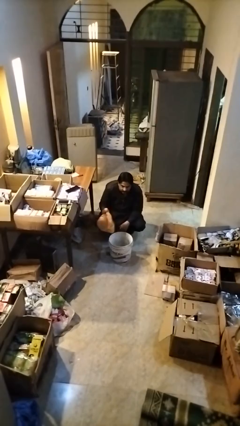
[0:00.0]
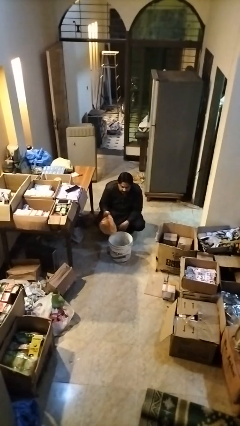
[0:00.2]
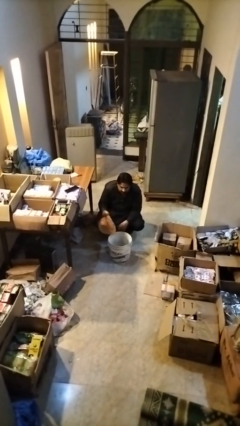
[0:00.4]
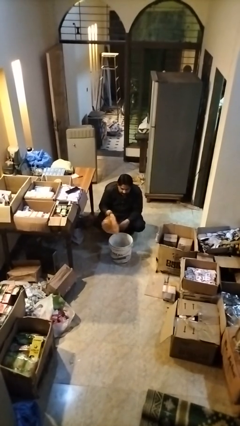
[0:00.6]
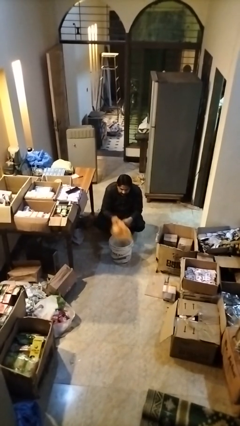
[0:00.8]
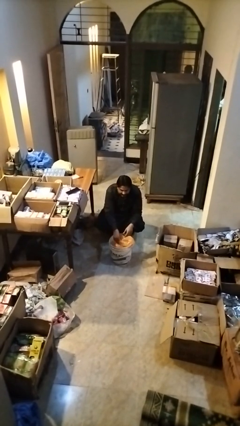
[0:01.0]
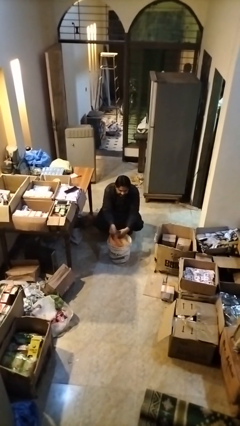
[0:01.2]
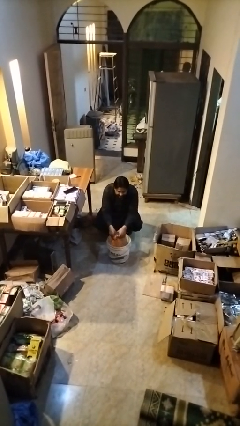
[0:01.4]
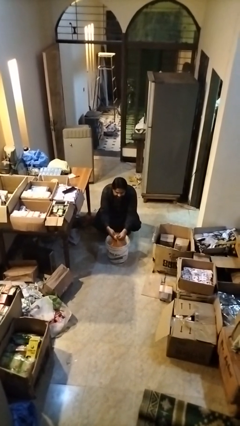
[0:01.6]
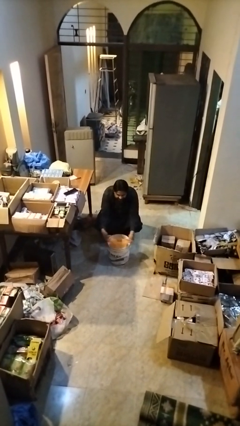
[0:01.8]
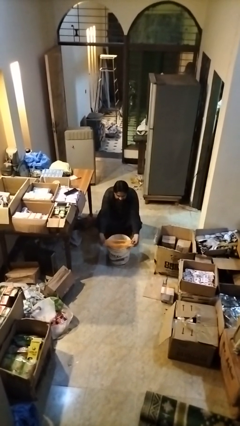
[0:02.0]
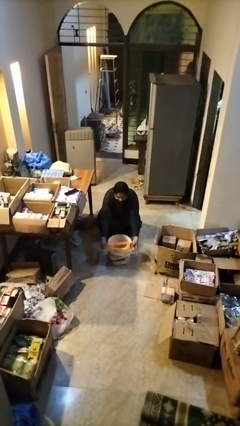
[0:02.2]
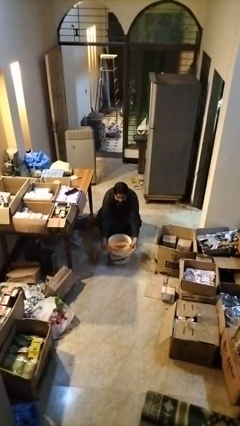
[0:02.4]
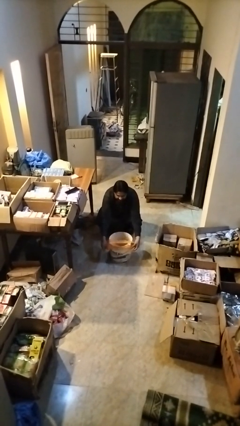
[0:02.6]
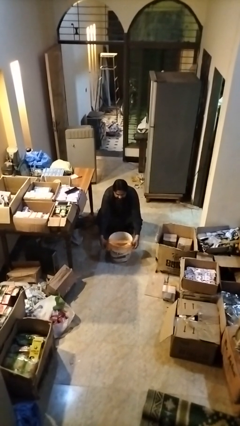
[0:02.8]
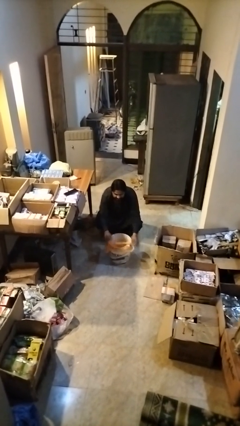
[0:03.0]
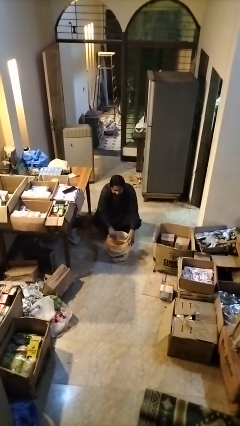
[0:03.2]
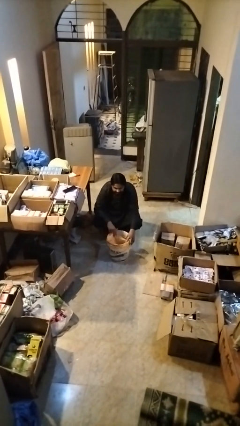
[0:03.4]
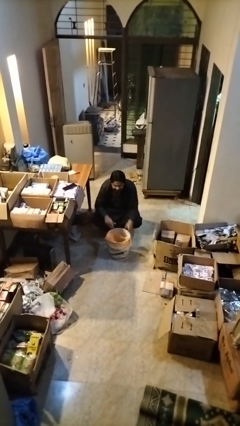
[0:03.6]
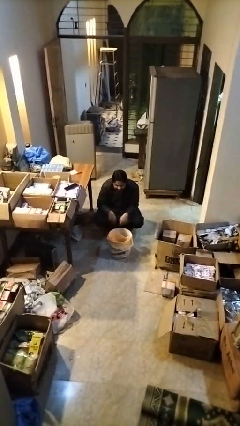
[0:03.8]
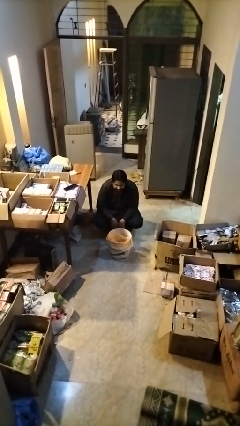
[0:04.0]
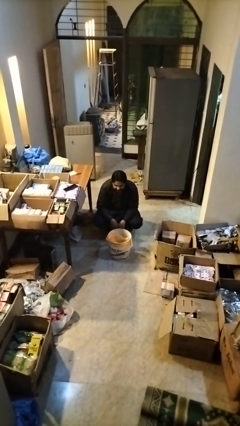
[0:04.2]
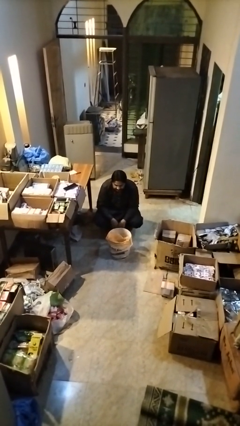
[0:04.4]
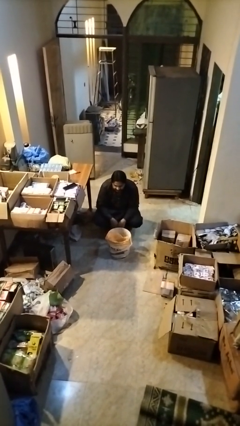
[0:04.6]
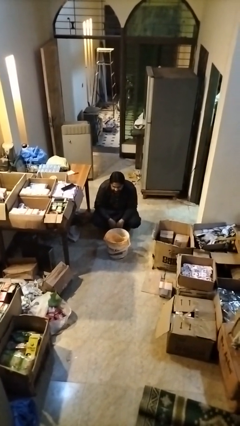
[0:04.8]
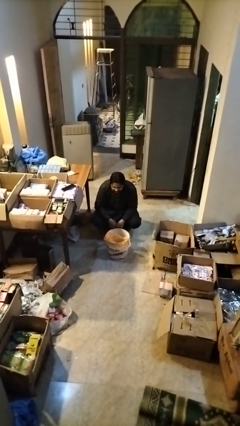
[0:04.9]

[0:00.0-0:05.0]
person inserts trashbag into trashcan

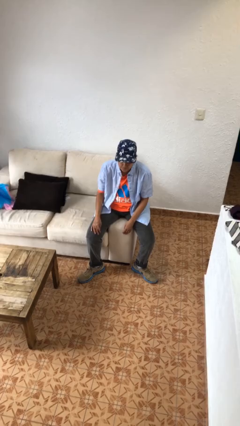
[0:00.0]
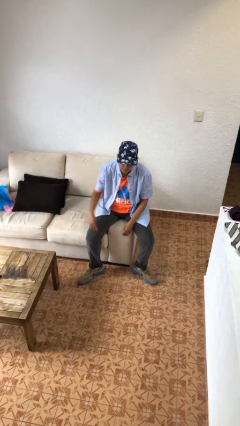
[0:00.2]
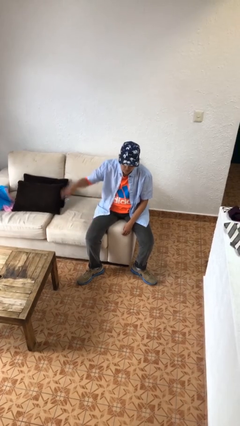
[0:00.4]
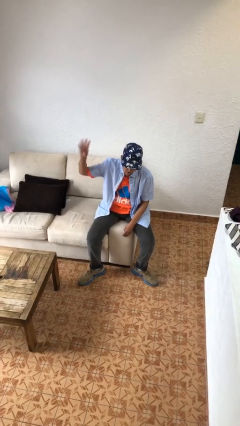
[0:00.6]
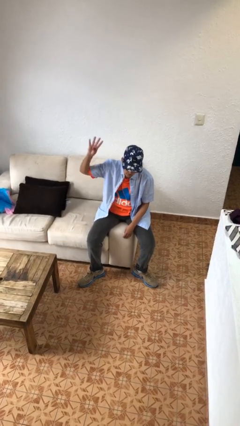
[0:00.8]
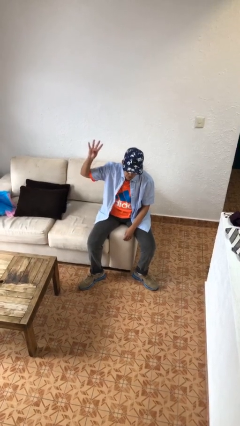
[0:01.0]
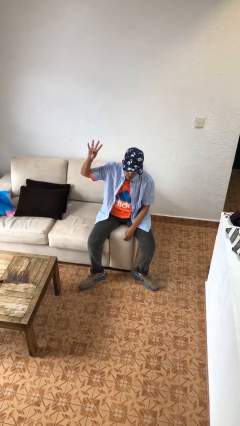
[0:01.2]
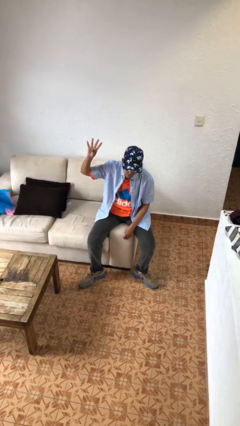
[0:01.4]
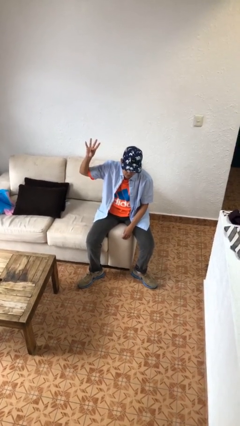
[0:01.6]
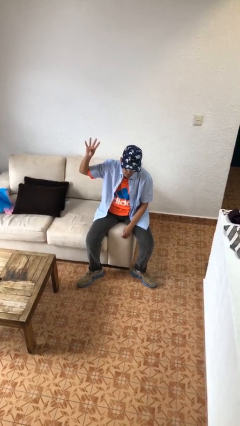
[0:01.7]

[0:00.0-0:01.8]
person gestures number four

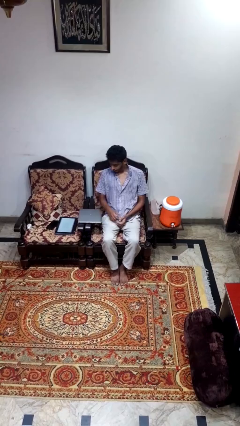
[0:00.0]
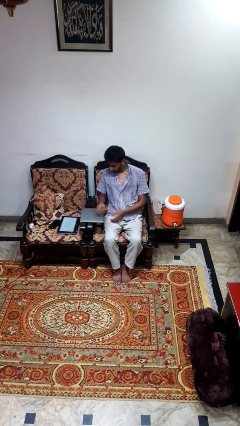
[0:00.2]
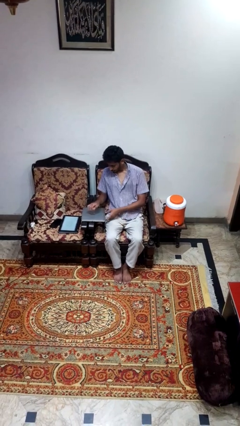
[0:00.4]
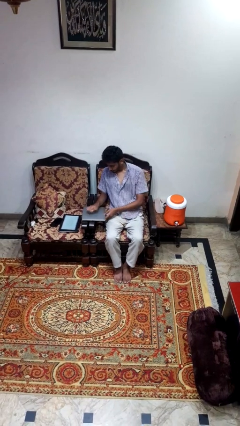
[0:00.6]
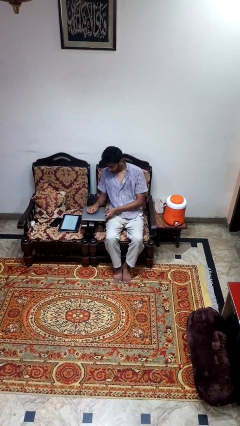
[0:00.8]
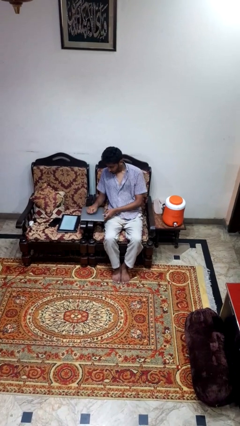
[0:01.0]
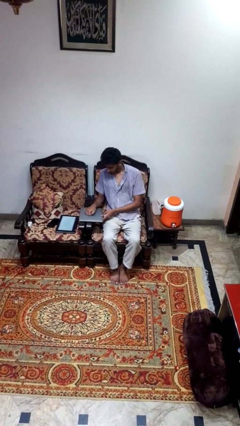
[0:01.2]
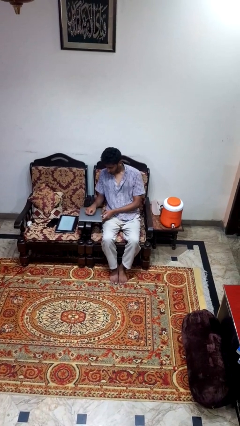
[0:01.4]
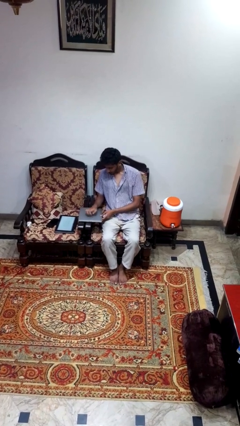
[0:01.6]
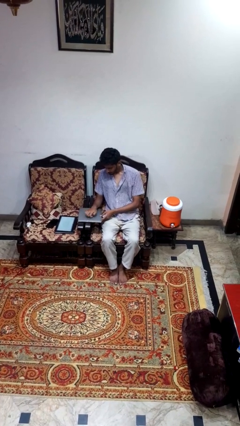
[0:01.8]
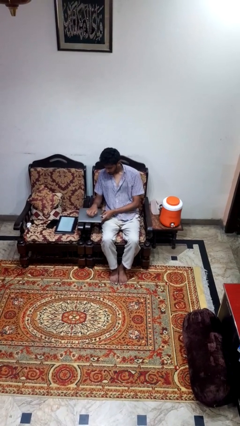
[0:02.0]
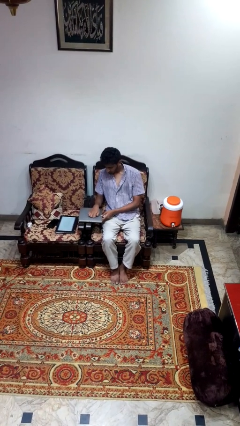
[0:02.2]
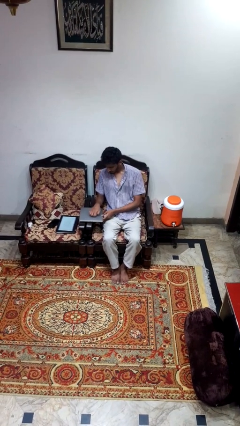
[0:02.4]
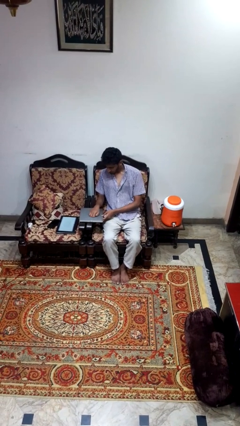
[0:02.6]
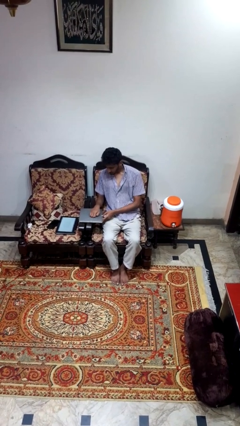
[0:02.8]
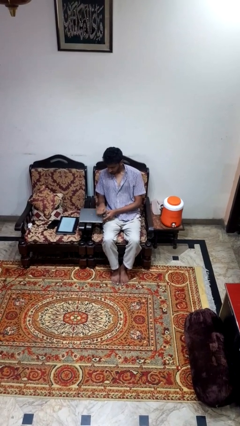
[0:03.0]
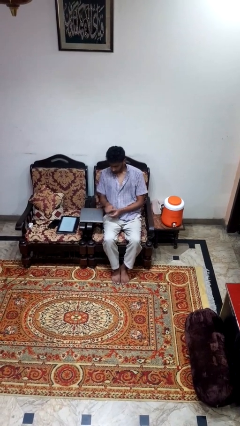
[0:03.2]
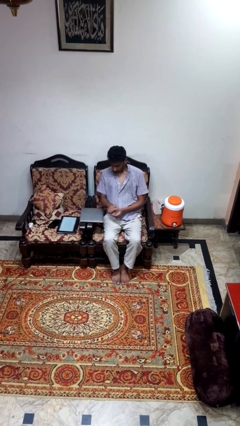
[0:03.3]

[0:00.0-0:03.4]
person taps object with finger

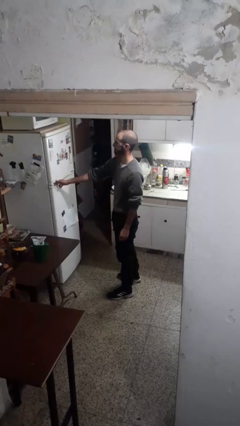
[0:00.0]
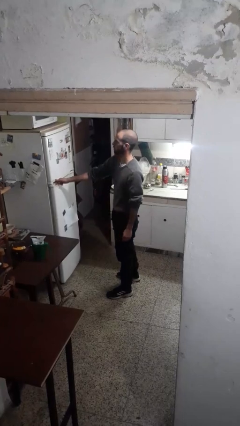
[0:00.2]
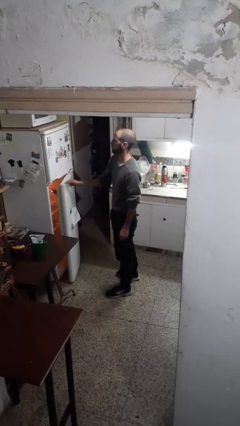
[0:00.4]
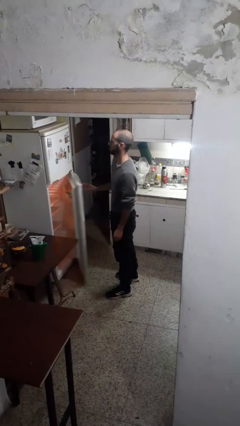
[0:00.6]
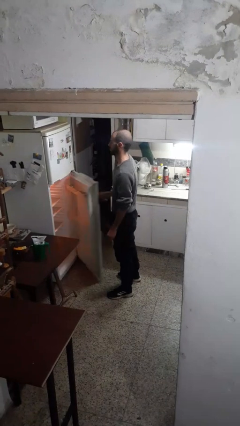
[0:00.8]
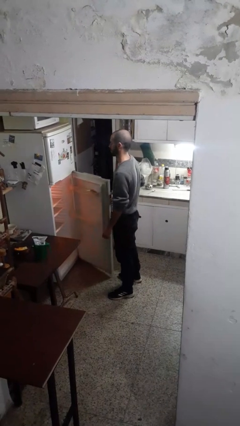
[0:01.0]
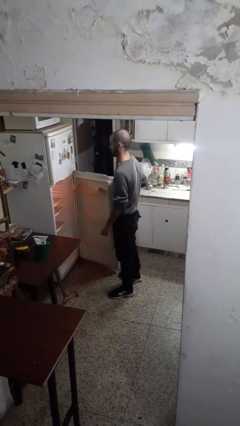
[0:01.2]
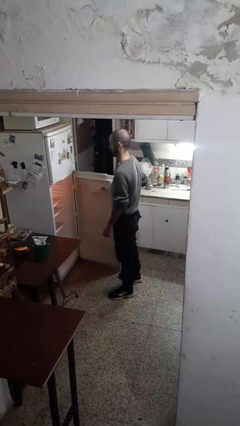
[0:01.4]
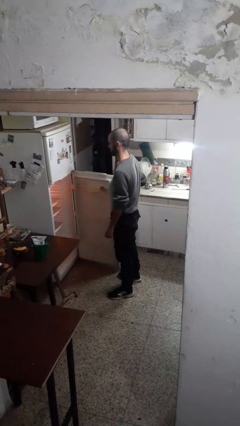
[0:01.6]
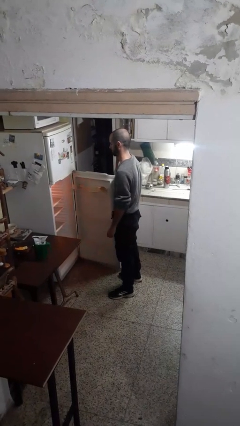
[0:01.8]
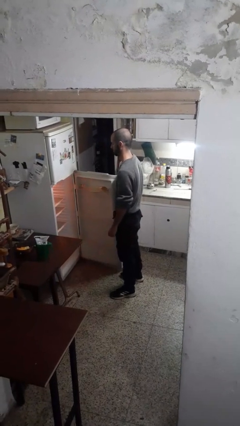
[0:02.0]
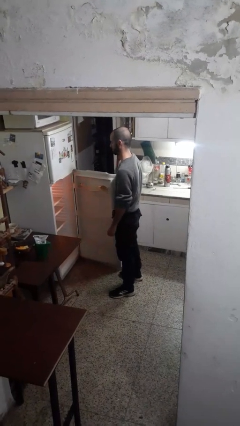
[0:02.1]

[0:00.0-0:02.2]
person opens refrigerator

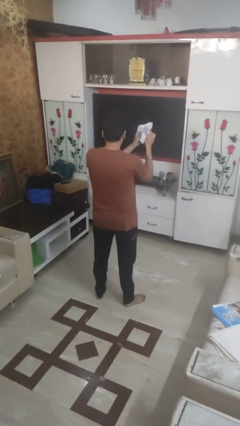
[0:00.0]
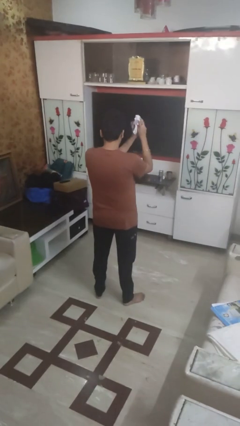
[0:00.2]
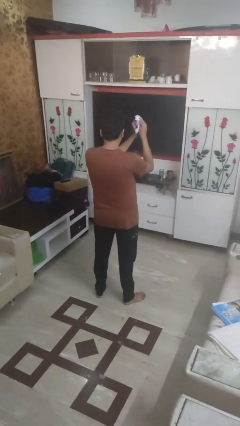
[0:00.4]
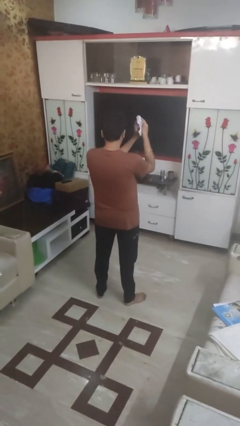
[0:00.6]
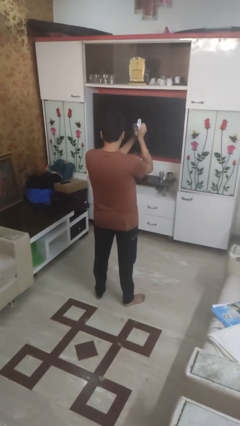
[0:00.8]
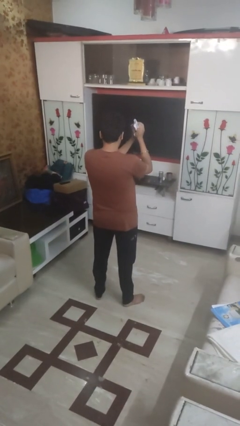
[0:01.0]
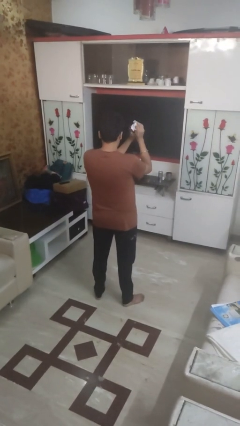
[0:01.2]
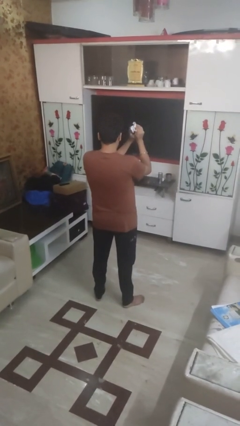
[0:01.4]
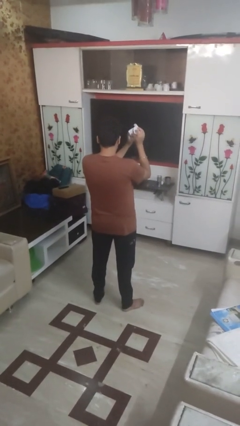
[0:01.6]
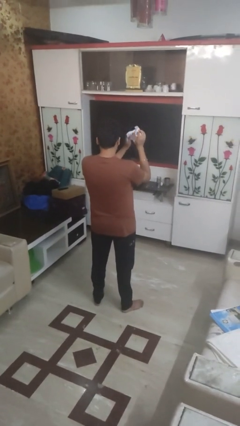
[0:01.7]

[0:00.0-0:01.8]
person crumples paper

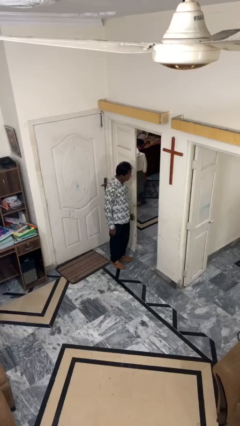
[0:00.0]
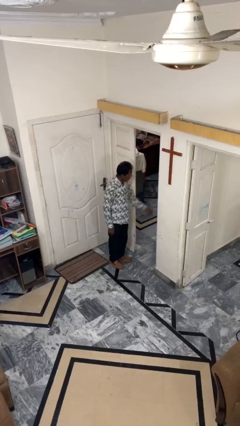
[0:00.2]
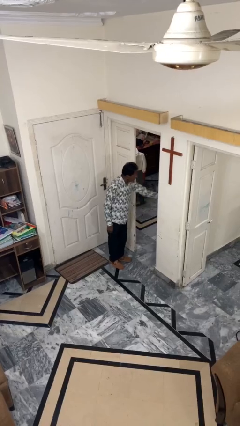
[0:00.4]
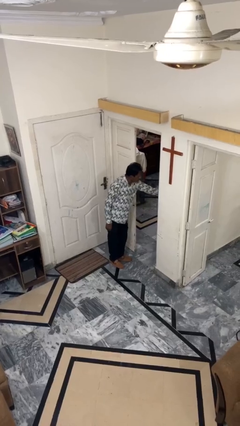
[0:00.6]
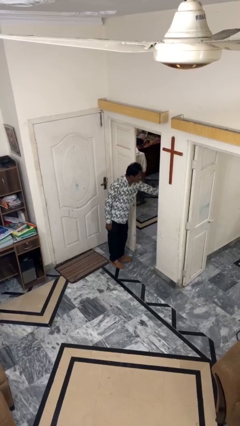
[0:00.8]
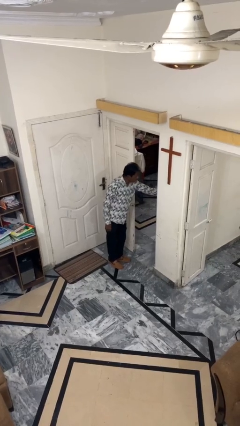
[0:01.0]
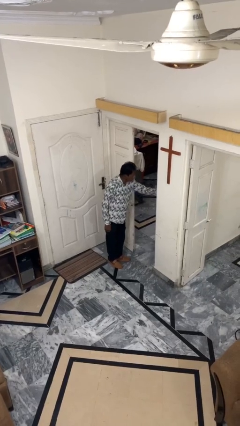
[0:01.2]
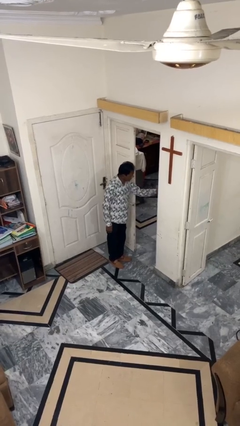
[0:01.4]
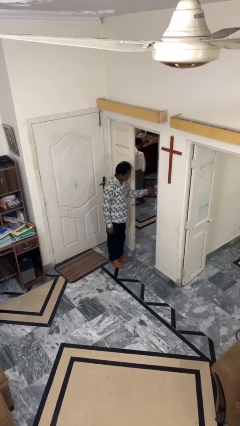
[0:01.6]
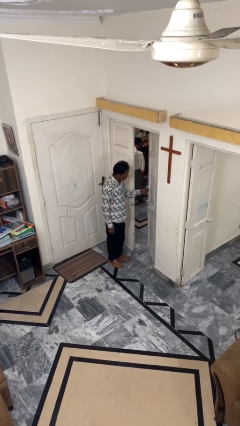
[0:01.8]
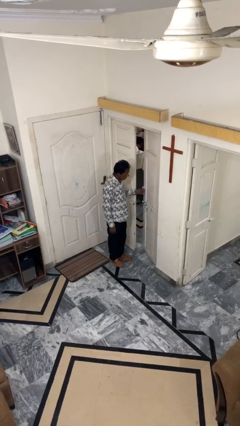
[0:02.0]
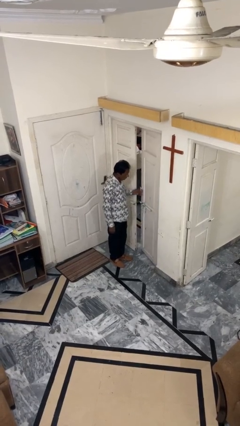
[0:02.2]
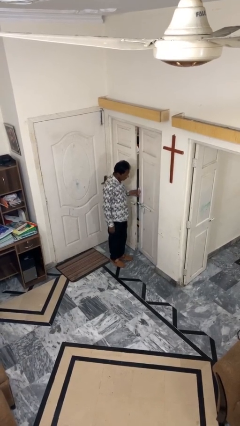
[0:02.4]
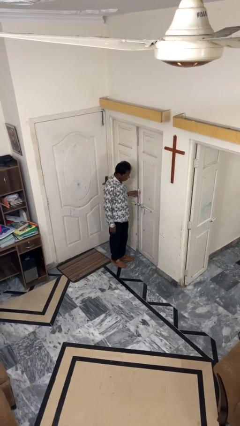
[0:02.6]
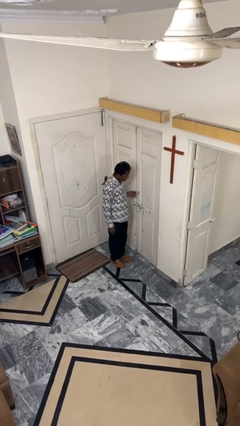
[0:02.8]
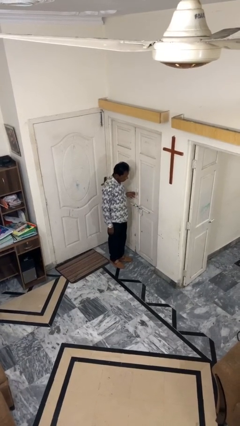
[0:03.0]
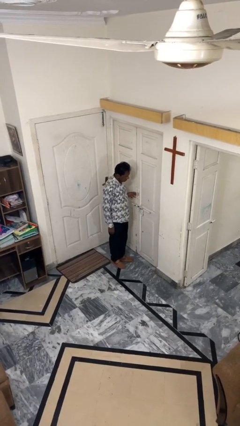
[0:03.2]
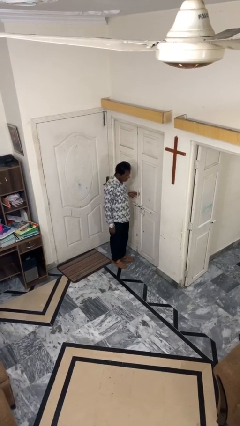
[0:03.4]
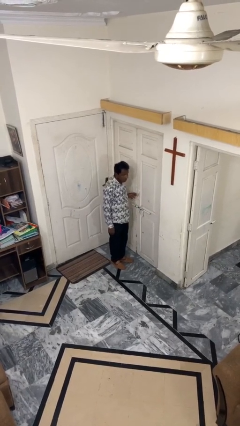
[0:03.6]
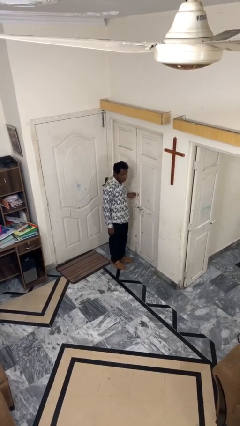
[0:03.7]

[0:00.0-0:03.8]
person closes facility door

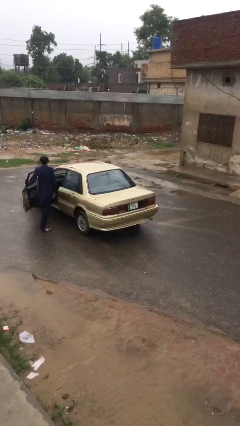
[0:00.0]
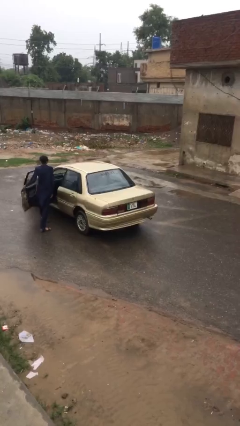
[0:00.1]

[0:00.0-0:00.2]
car picks up person
